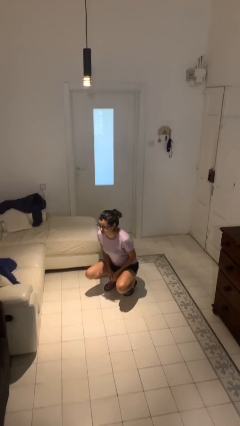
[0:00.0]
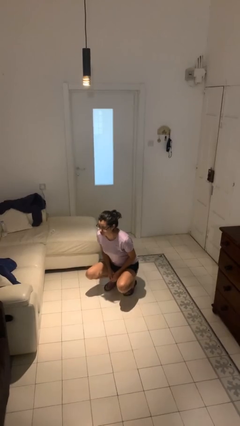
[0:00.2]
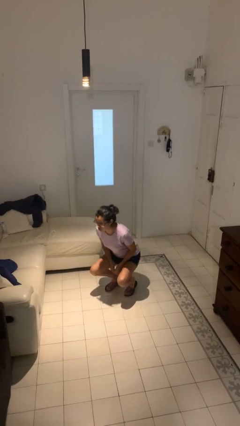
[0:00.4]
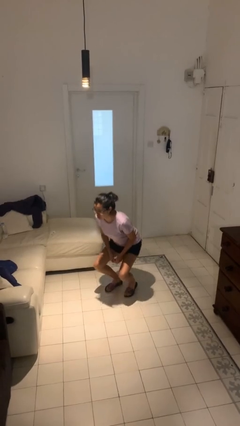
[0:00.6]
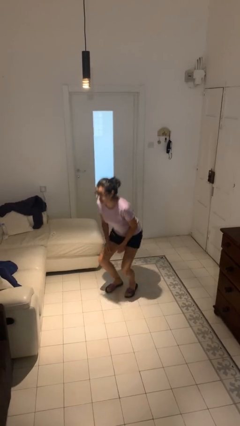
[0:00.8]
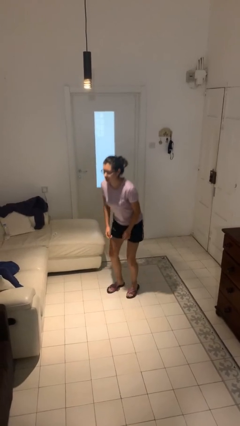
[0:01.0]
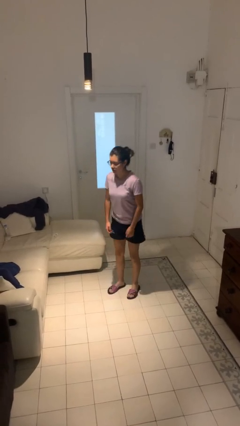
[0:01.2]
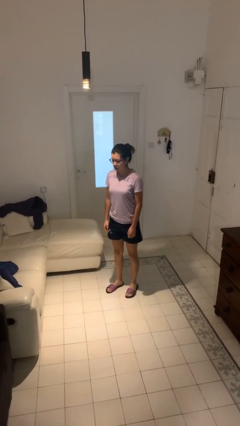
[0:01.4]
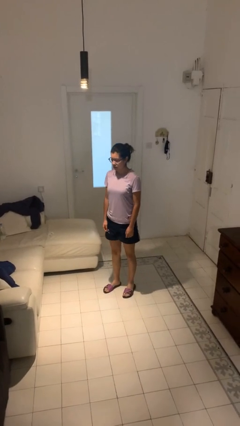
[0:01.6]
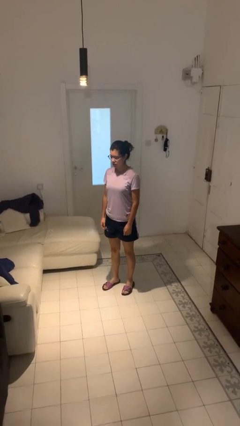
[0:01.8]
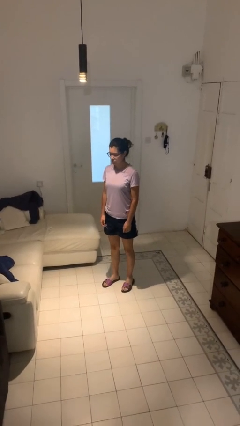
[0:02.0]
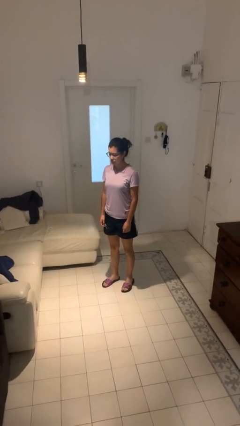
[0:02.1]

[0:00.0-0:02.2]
person stands up

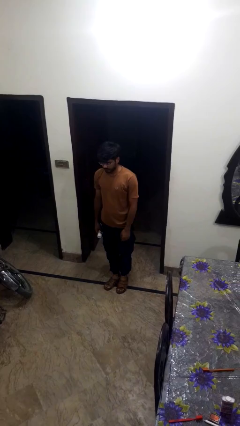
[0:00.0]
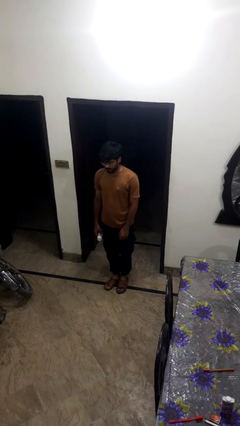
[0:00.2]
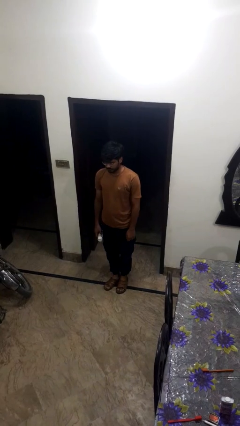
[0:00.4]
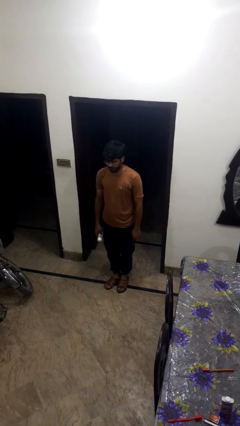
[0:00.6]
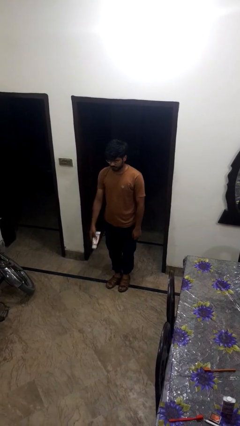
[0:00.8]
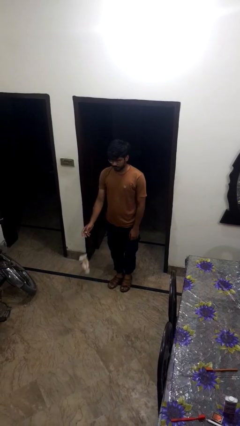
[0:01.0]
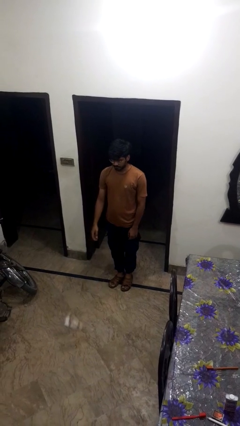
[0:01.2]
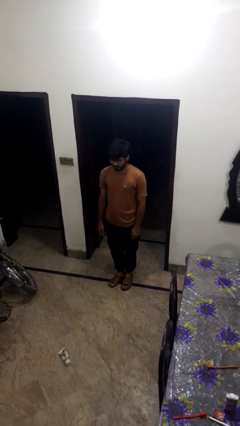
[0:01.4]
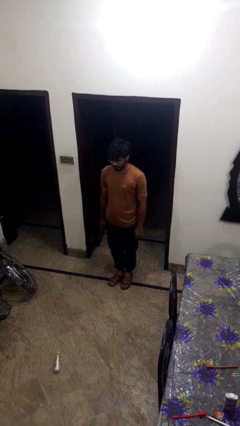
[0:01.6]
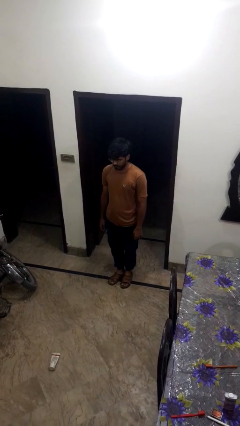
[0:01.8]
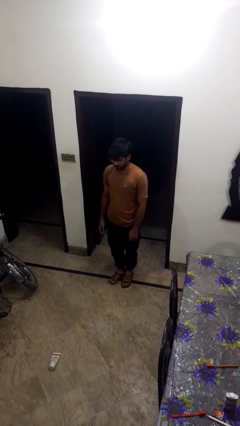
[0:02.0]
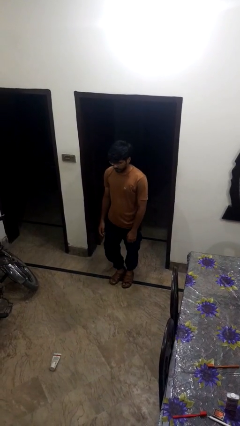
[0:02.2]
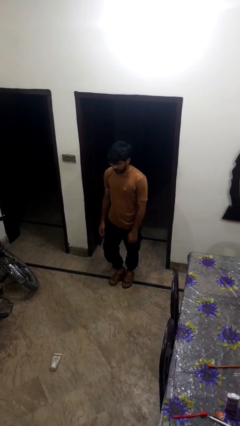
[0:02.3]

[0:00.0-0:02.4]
person throws object to ground

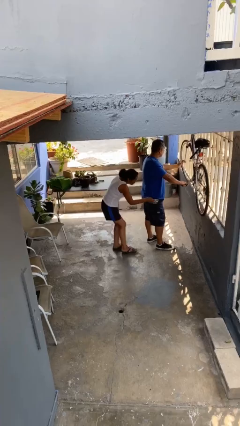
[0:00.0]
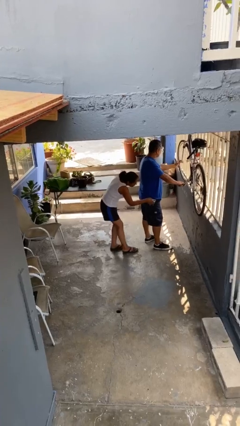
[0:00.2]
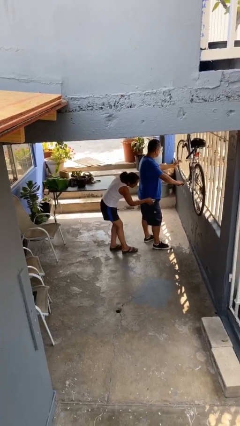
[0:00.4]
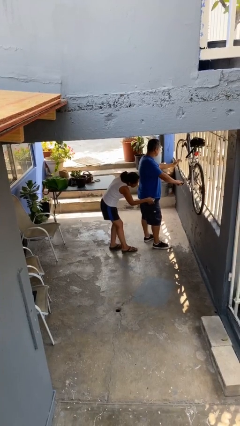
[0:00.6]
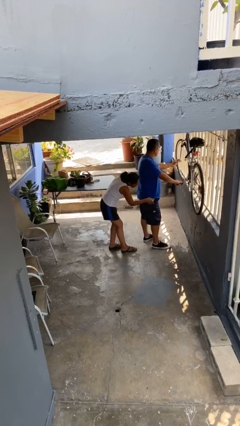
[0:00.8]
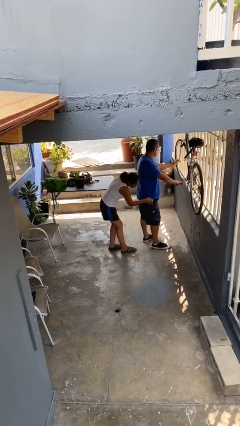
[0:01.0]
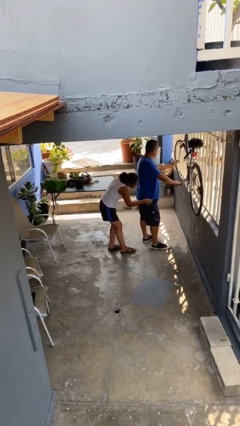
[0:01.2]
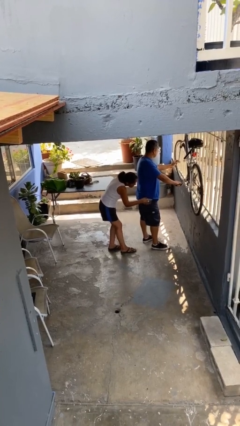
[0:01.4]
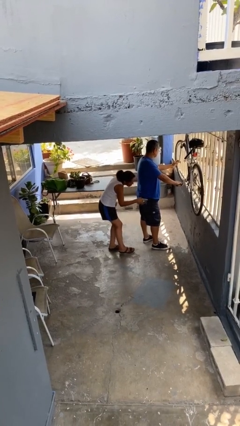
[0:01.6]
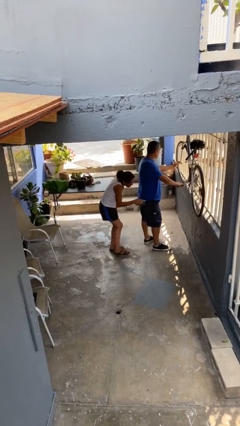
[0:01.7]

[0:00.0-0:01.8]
person steals object from person

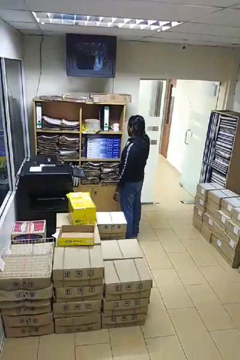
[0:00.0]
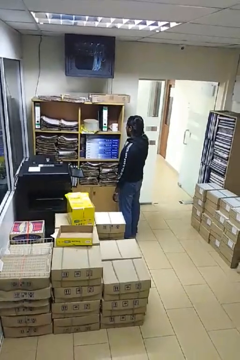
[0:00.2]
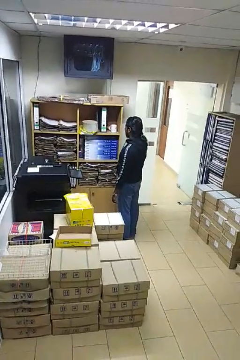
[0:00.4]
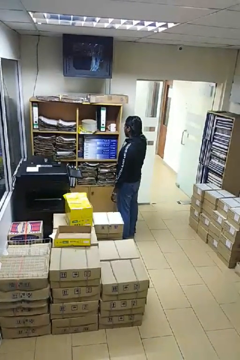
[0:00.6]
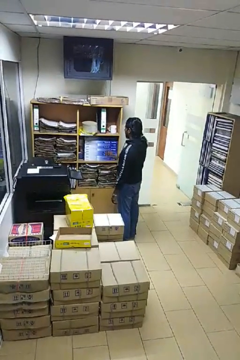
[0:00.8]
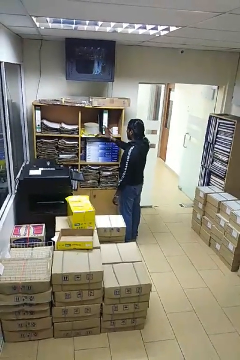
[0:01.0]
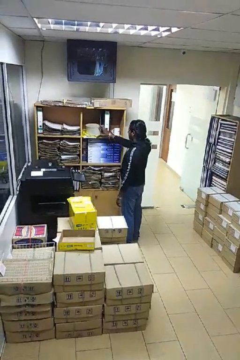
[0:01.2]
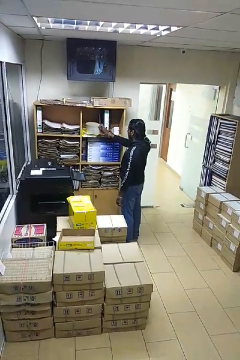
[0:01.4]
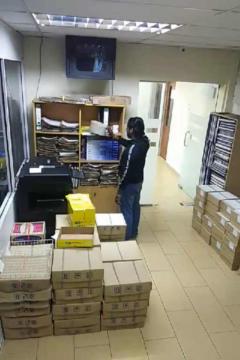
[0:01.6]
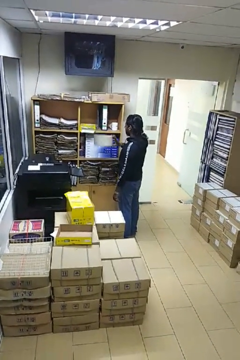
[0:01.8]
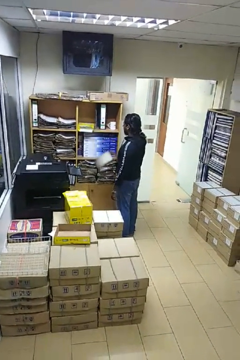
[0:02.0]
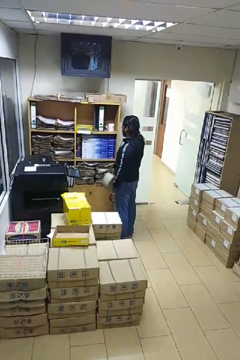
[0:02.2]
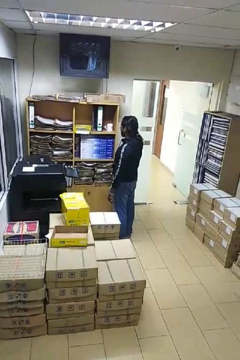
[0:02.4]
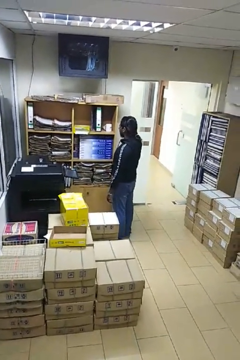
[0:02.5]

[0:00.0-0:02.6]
person picks up object from cabinet

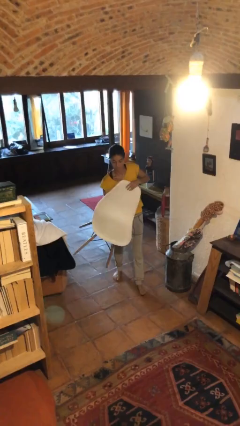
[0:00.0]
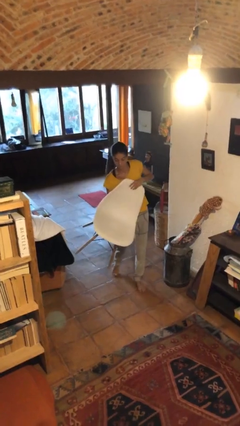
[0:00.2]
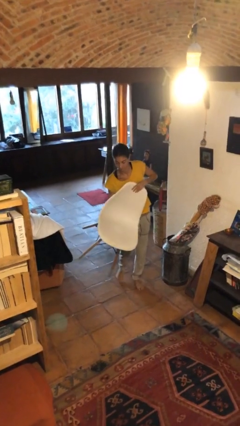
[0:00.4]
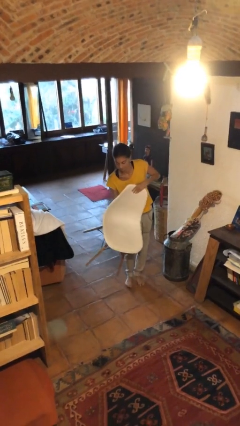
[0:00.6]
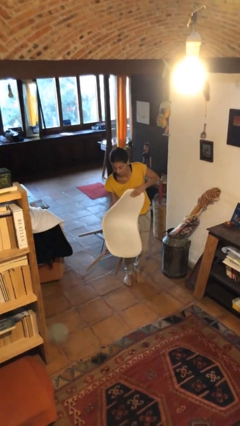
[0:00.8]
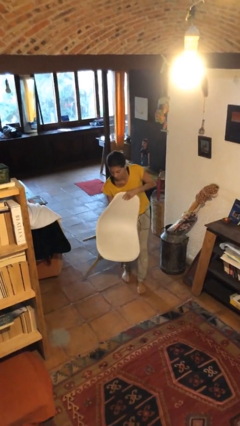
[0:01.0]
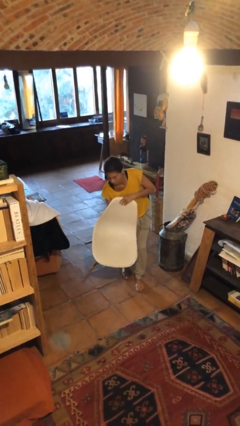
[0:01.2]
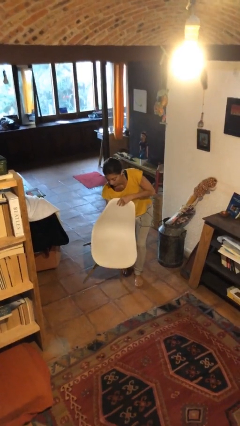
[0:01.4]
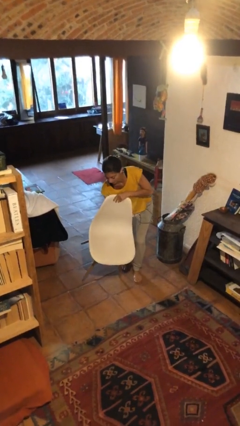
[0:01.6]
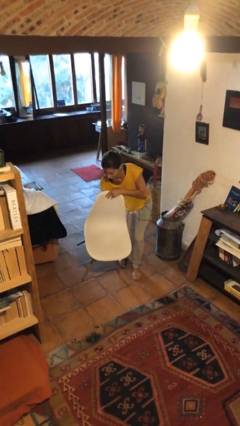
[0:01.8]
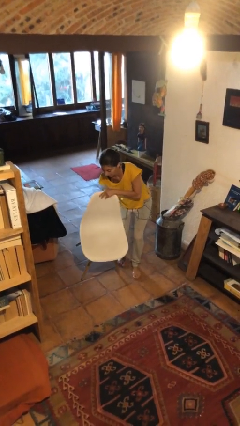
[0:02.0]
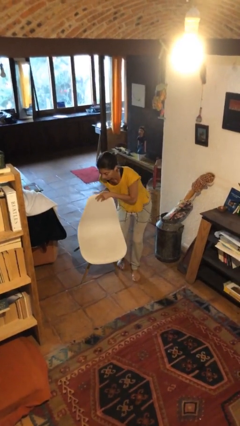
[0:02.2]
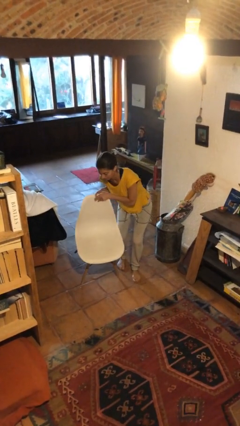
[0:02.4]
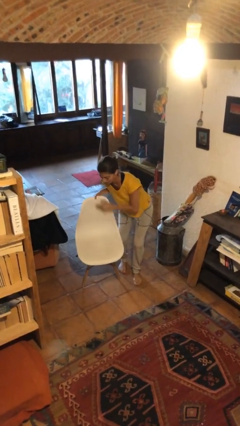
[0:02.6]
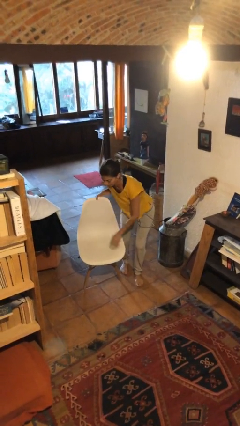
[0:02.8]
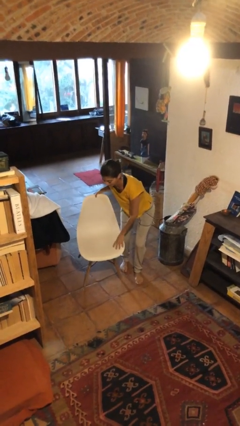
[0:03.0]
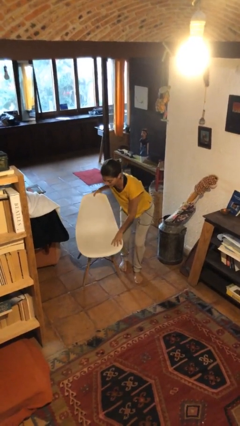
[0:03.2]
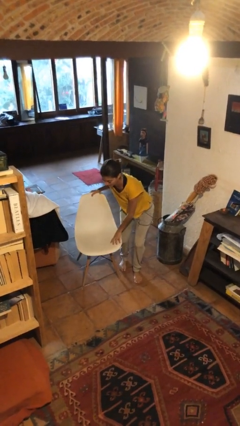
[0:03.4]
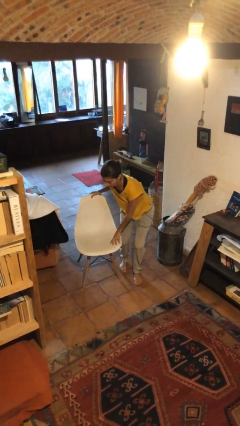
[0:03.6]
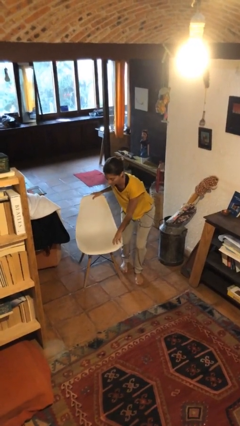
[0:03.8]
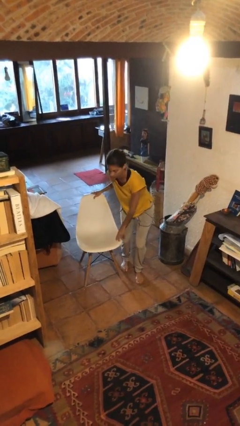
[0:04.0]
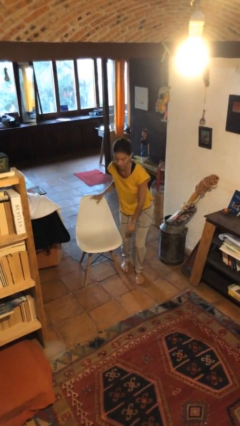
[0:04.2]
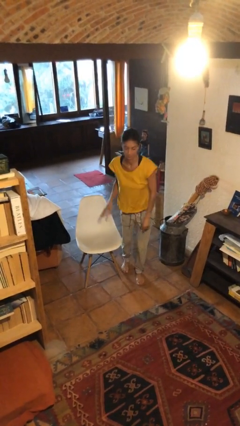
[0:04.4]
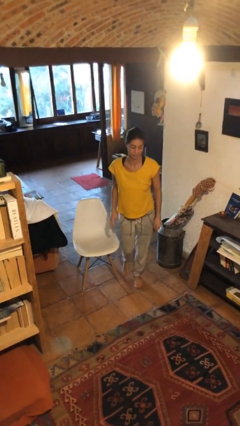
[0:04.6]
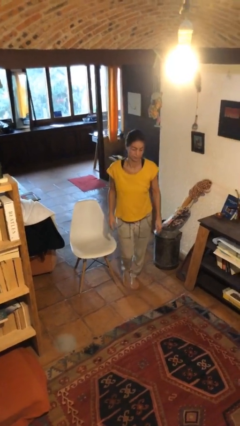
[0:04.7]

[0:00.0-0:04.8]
person puts down object on floor

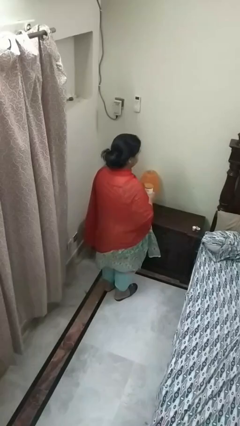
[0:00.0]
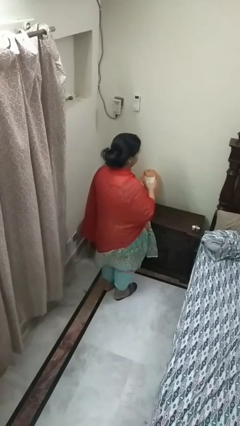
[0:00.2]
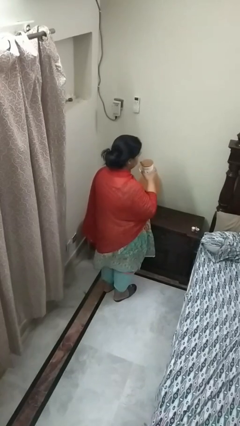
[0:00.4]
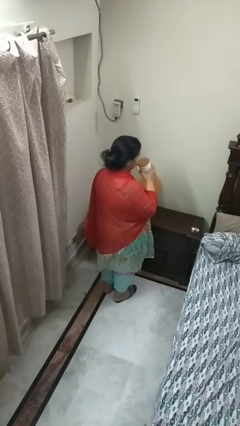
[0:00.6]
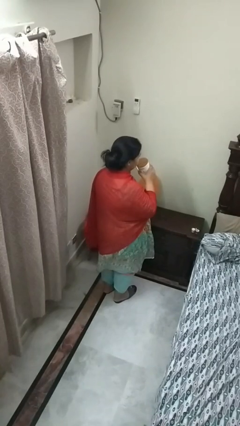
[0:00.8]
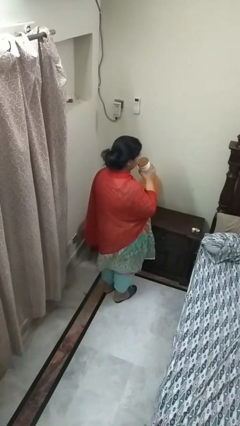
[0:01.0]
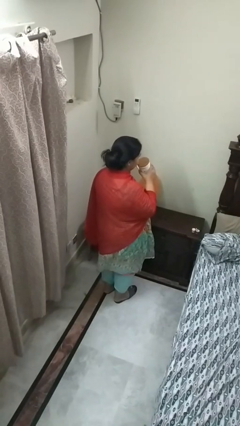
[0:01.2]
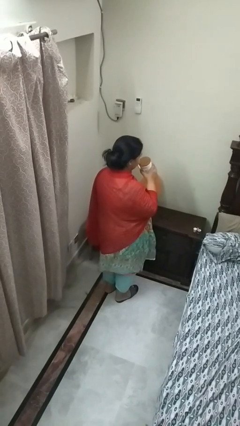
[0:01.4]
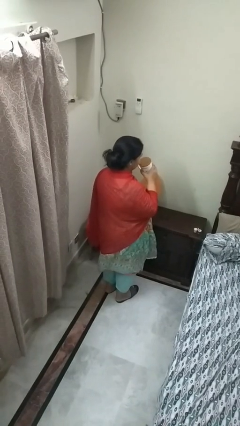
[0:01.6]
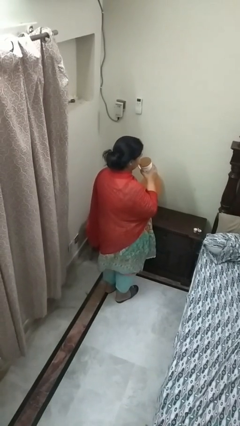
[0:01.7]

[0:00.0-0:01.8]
person drinks from straw

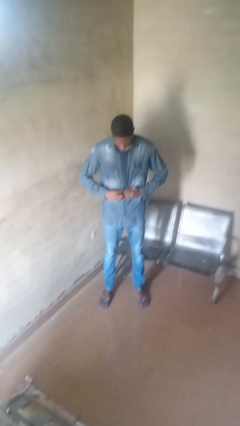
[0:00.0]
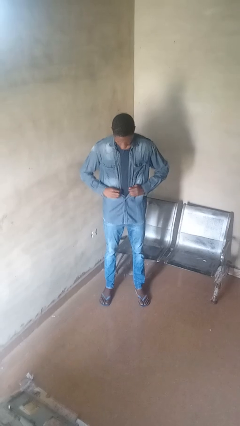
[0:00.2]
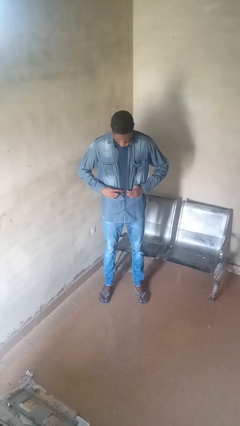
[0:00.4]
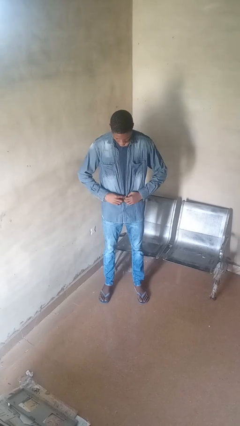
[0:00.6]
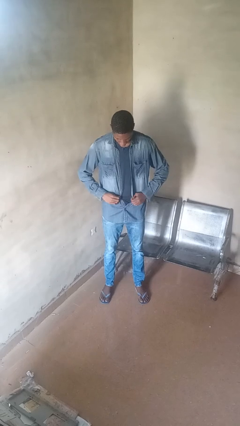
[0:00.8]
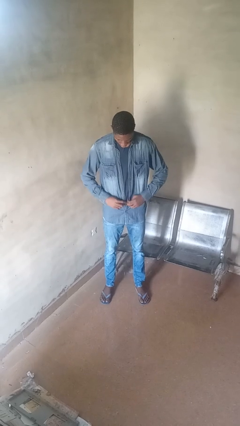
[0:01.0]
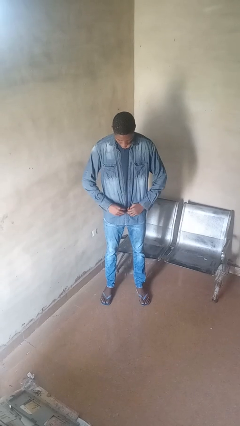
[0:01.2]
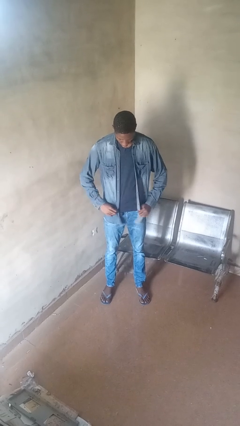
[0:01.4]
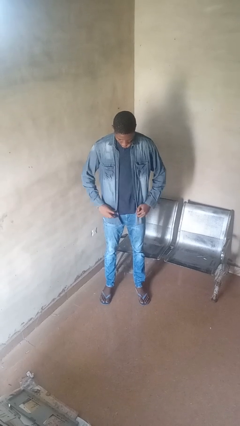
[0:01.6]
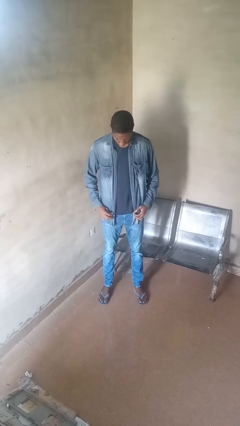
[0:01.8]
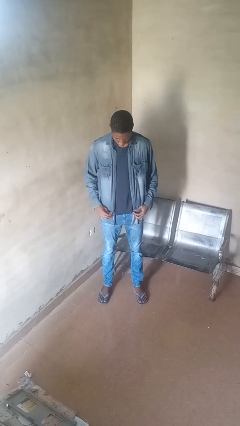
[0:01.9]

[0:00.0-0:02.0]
person unbuttons shirt
